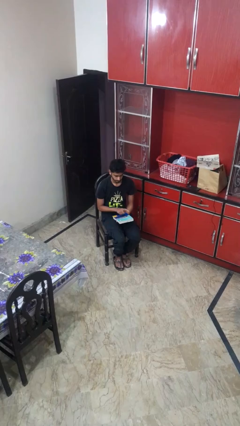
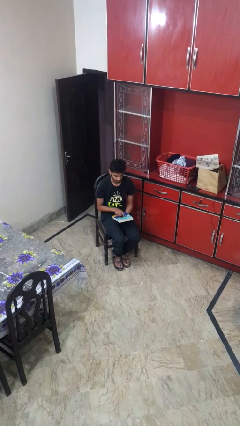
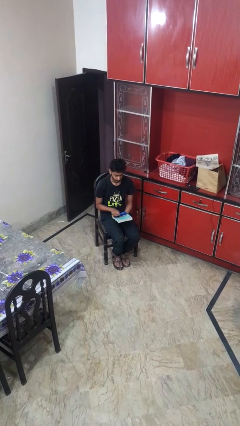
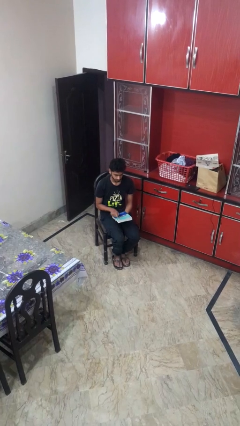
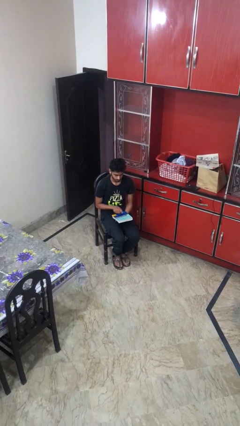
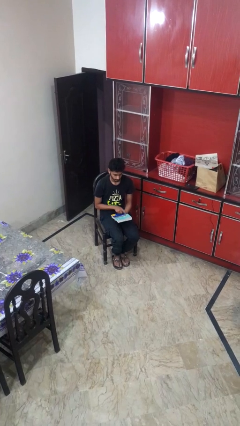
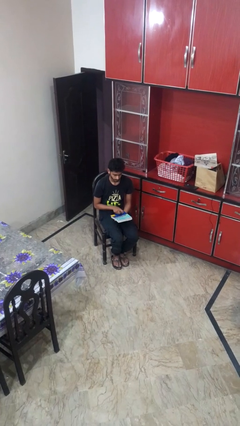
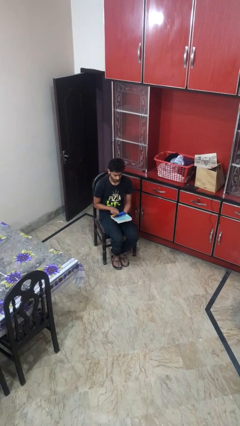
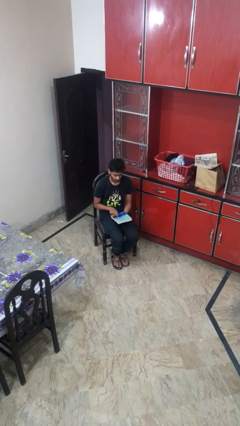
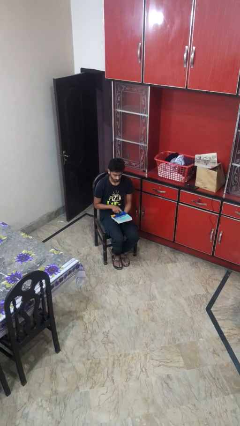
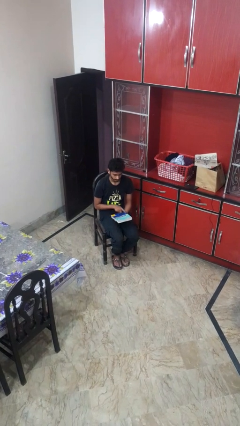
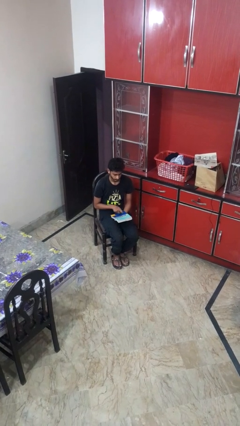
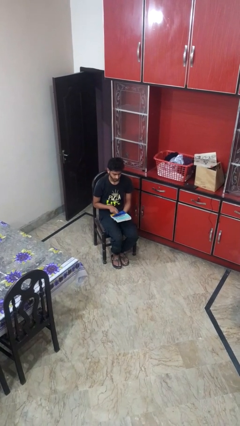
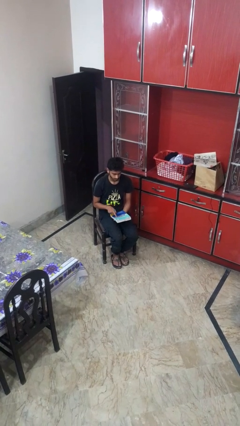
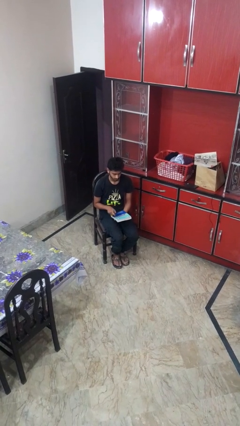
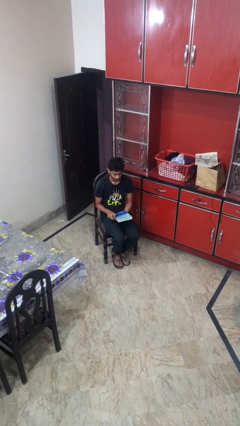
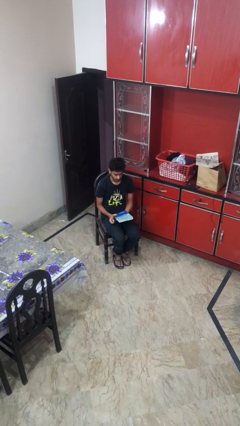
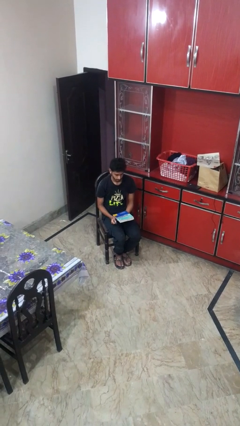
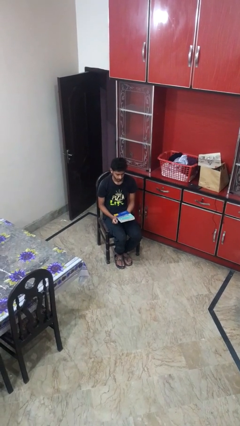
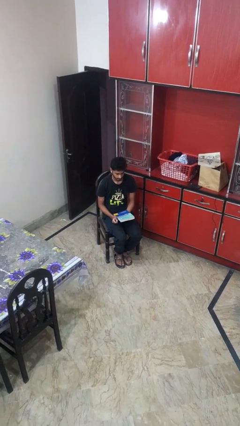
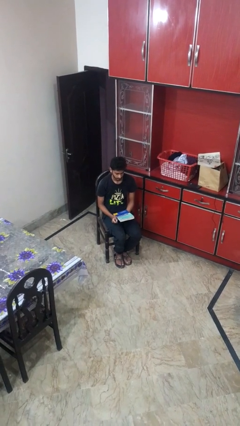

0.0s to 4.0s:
person taps object with finger

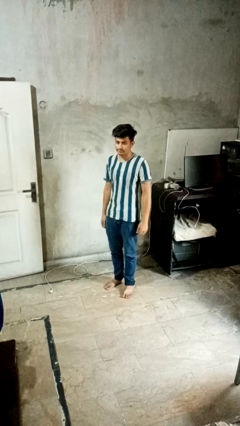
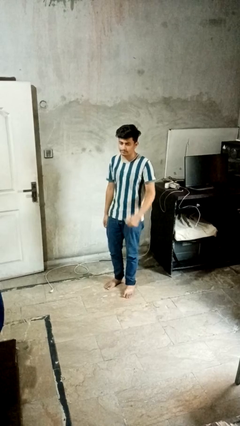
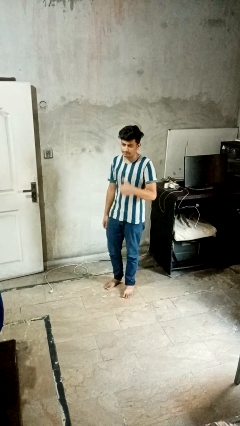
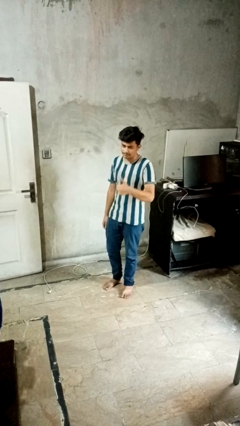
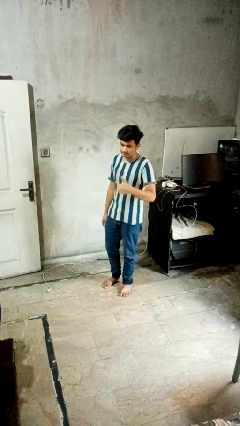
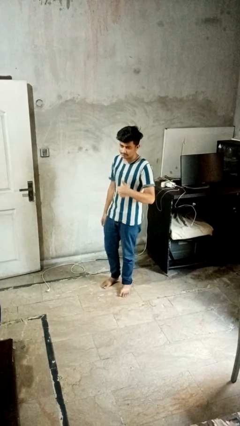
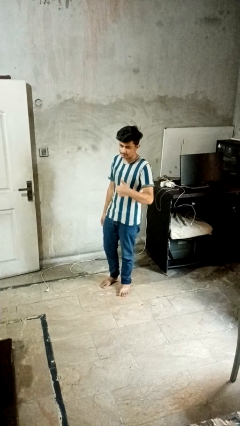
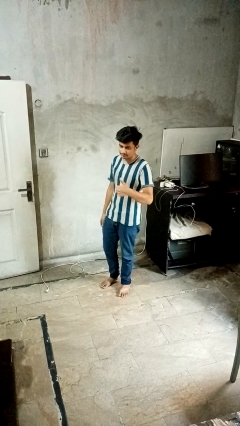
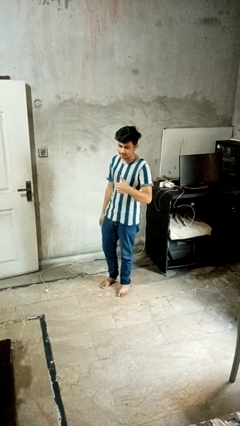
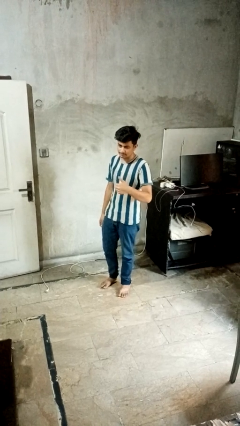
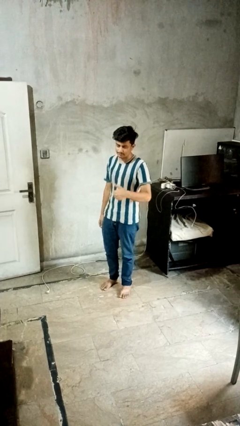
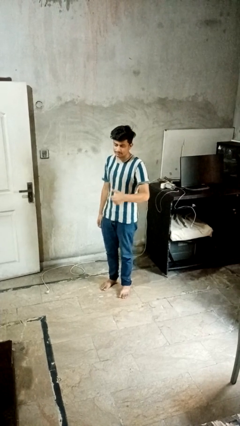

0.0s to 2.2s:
person gestures thumbs up

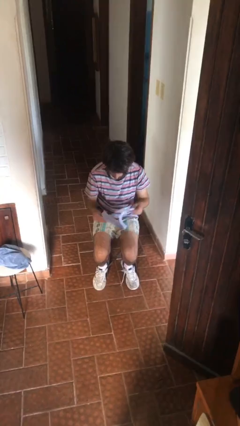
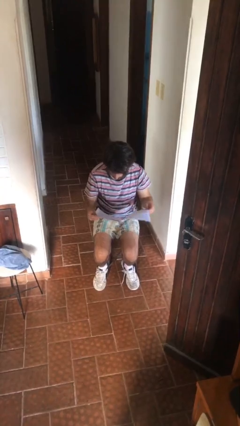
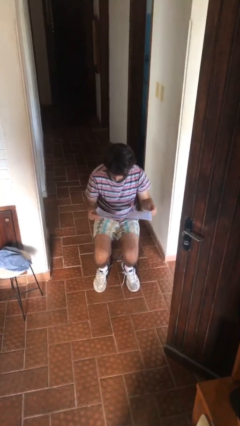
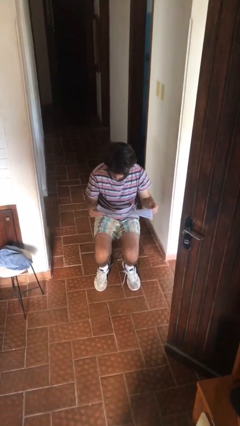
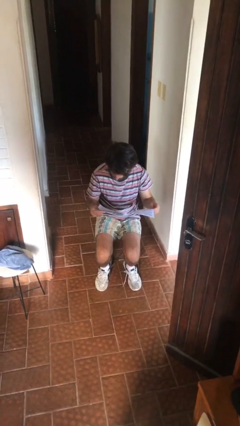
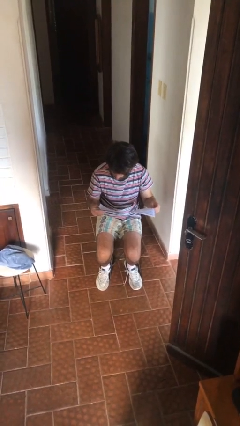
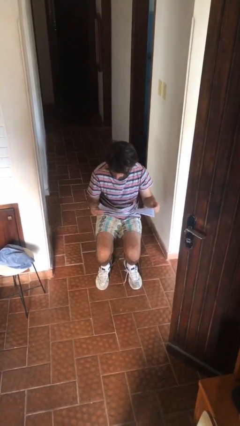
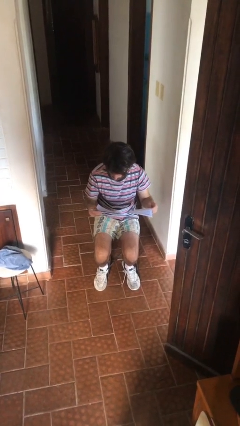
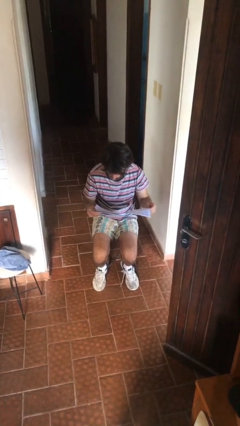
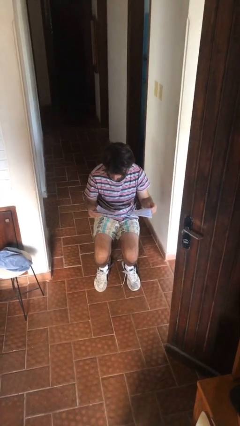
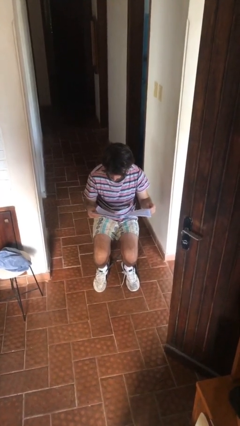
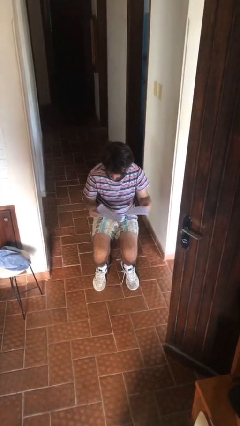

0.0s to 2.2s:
person reads document

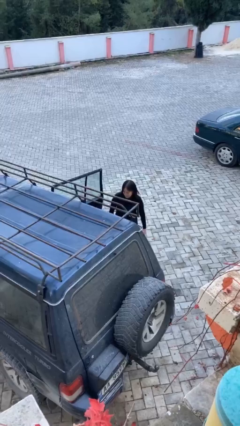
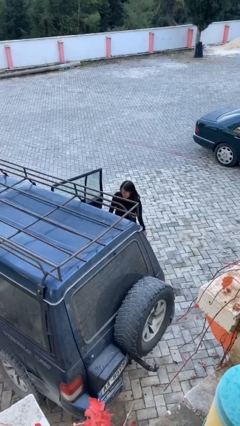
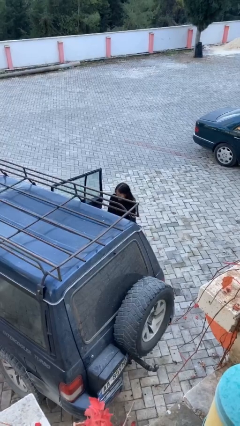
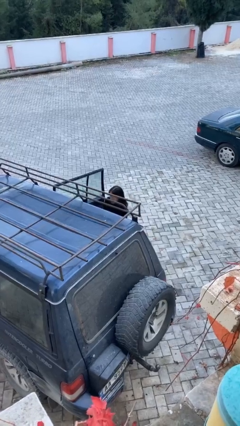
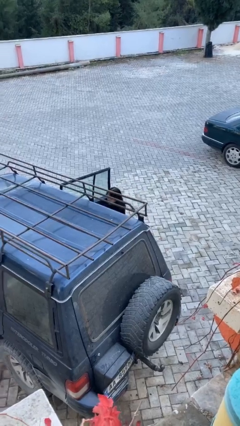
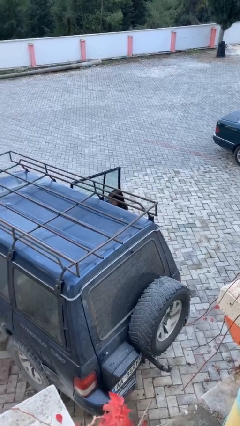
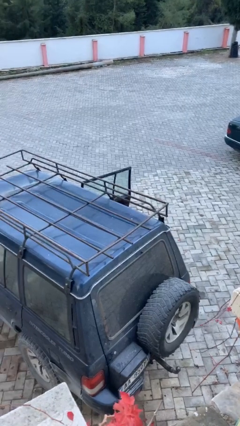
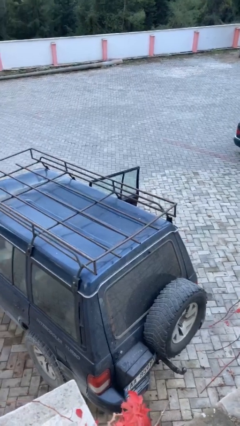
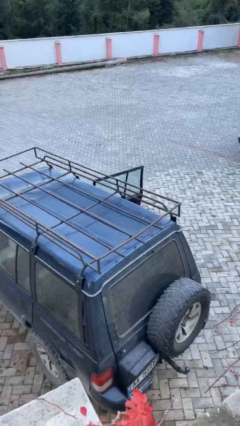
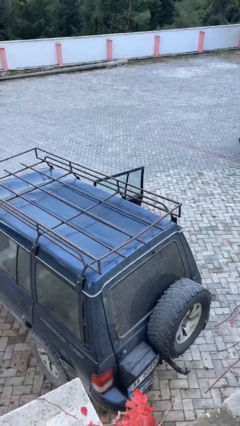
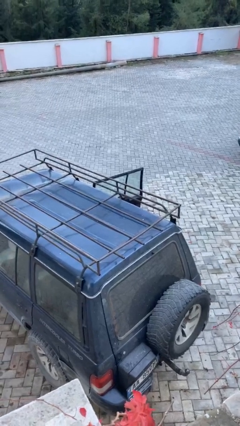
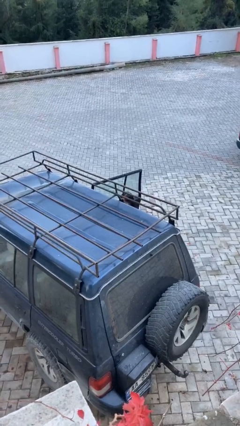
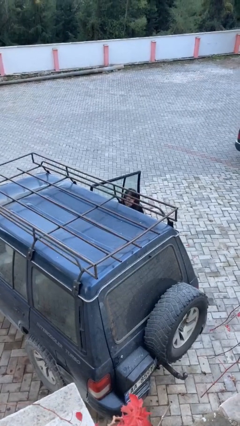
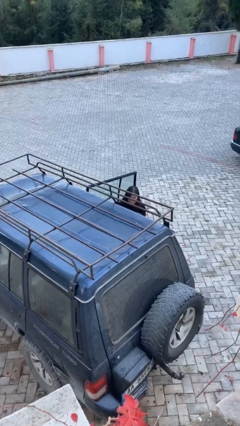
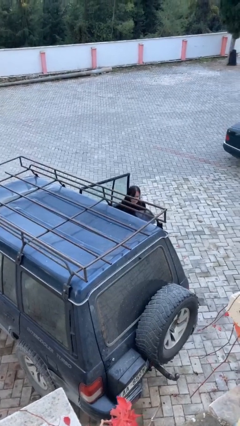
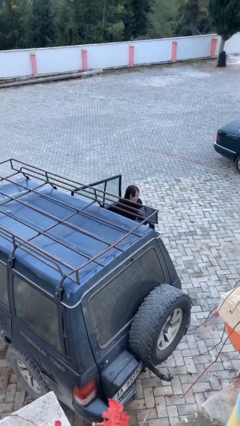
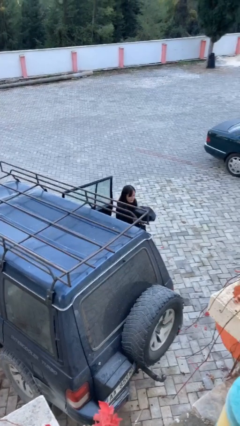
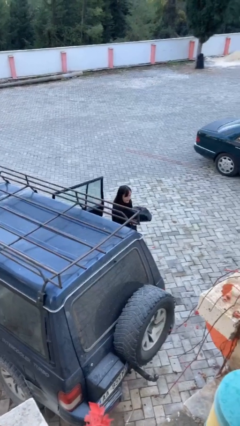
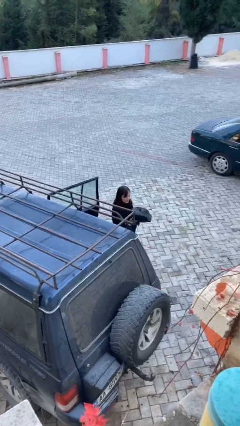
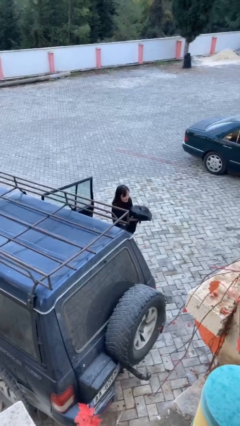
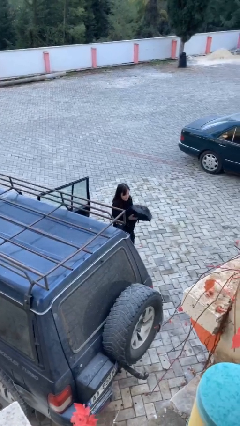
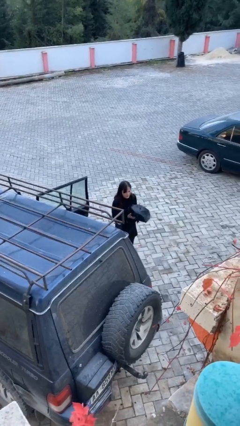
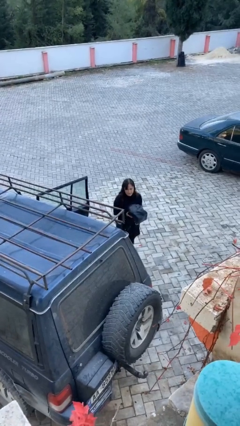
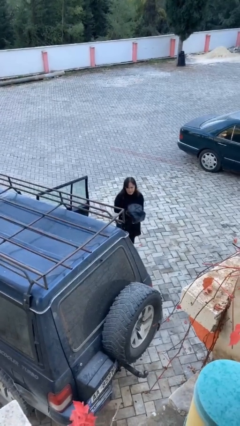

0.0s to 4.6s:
person unloads car

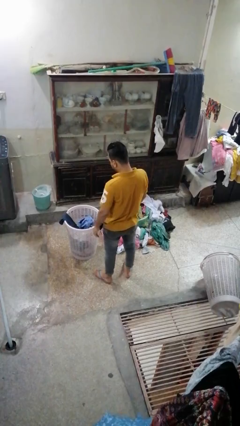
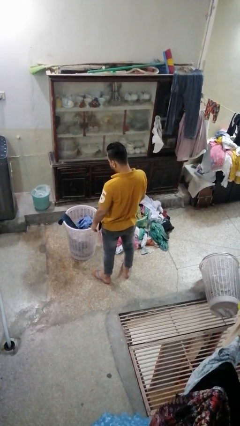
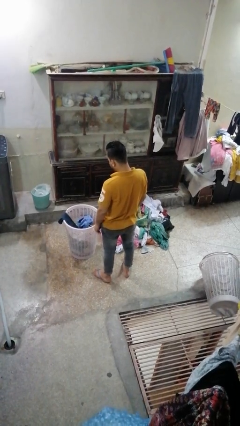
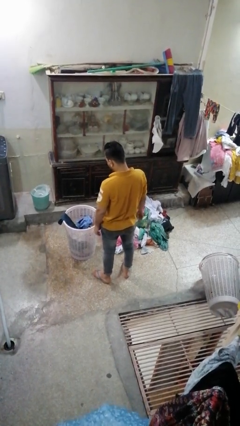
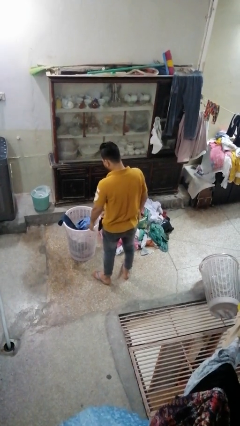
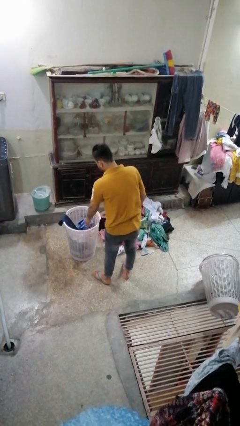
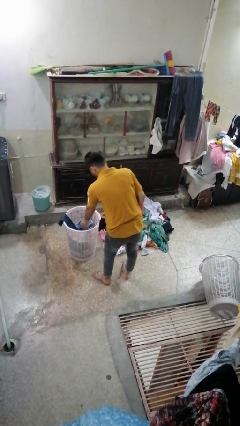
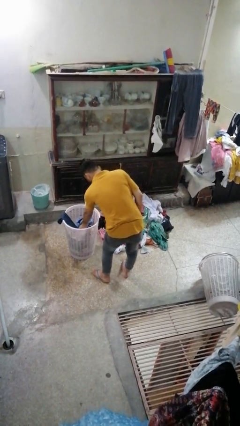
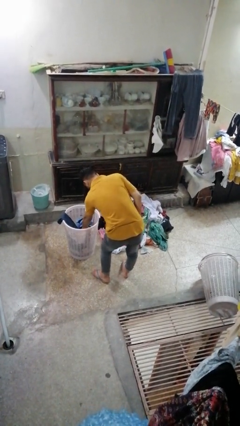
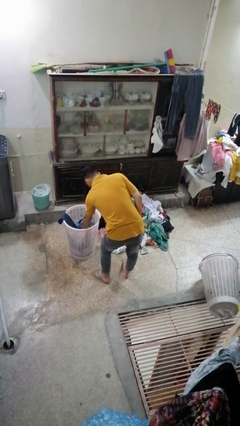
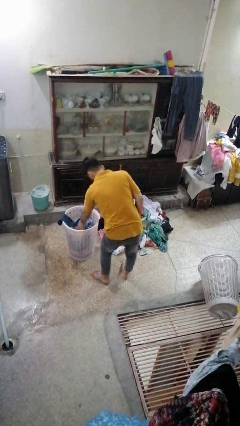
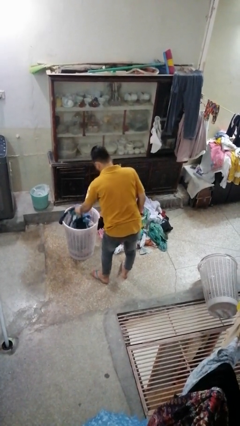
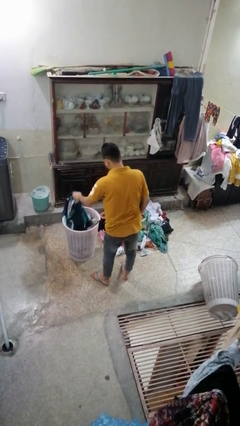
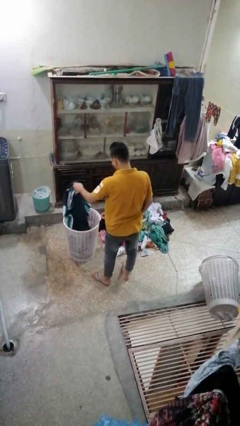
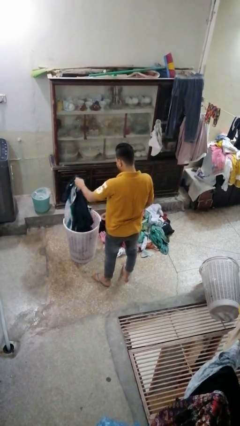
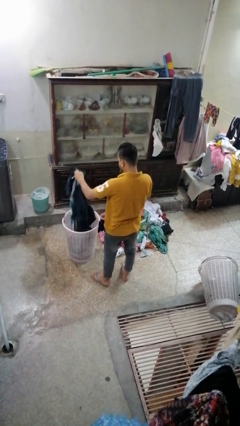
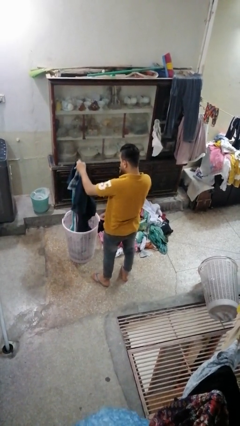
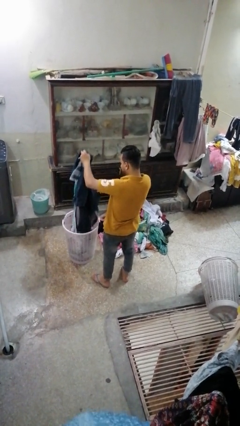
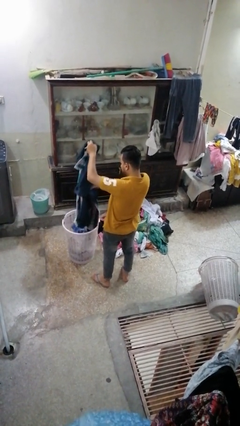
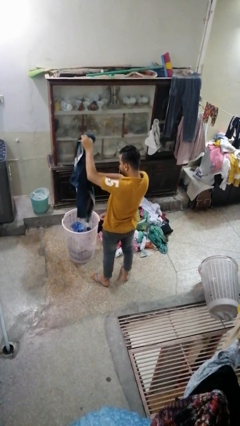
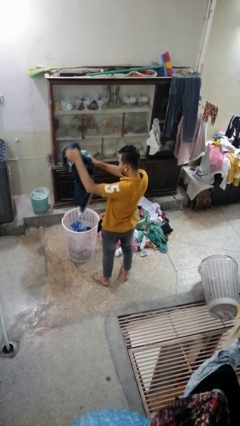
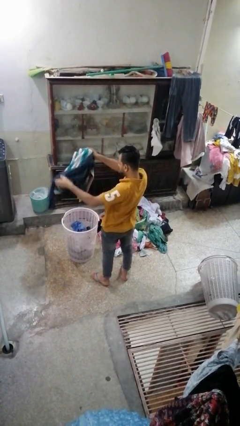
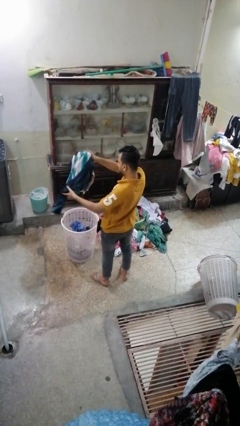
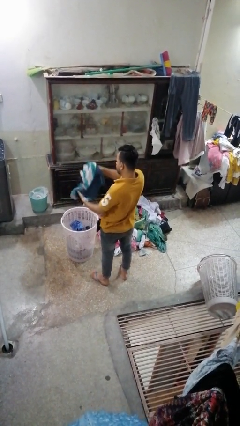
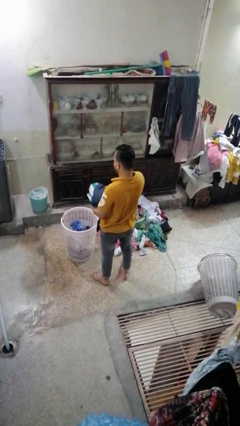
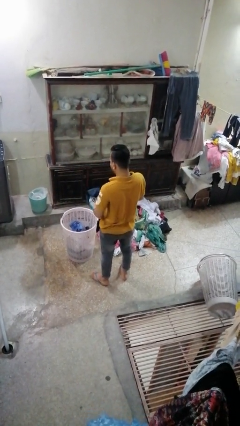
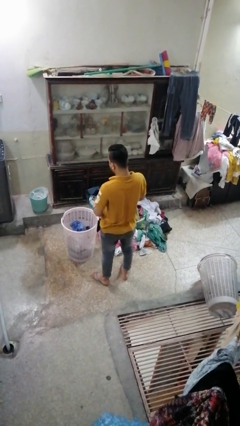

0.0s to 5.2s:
person takes object from basket
